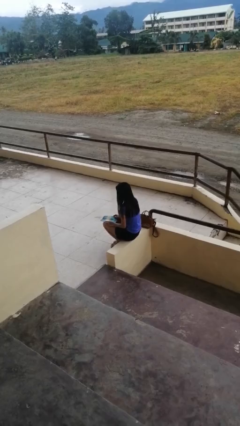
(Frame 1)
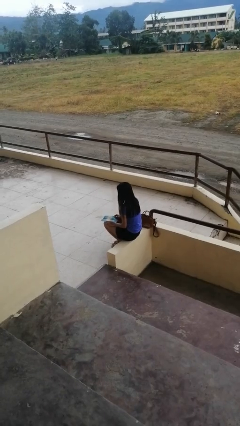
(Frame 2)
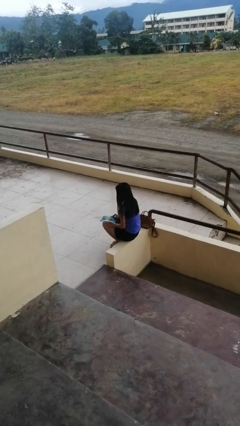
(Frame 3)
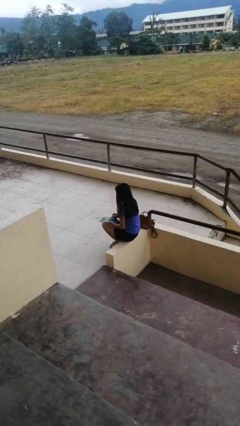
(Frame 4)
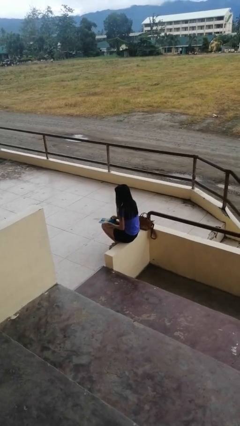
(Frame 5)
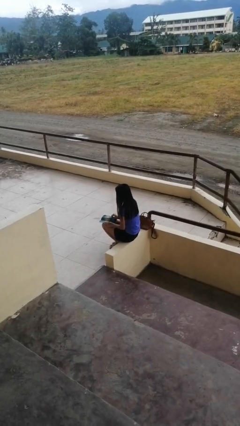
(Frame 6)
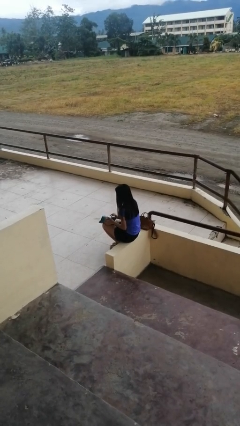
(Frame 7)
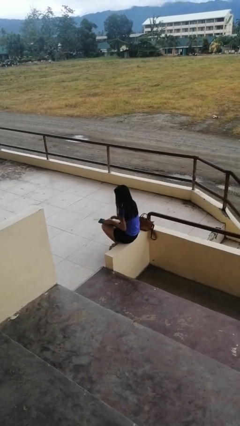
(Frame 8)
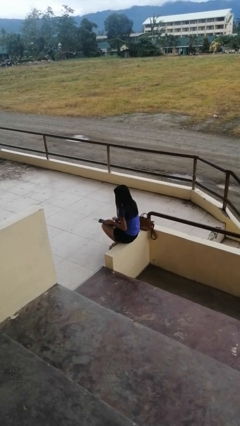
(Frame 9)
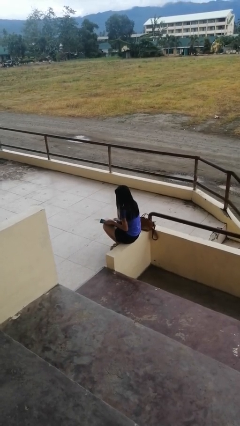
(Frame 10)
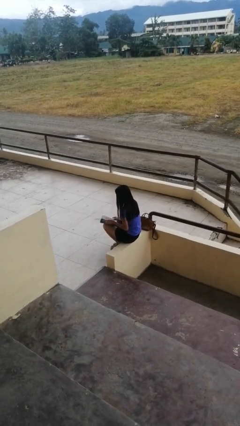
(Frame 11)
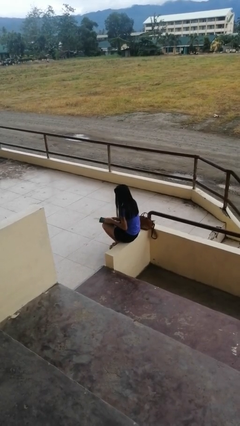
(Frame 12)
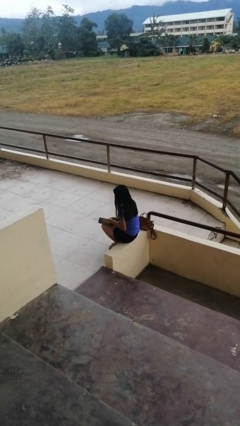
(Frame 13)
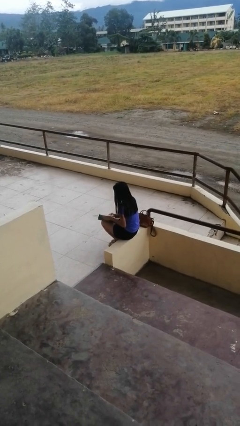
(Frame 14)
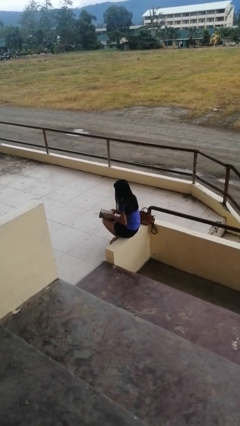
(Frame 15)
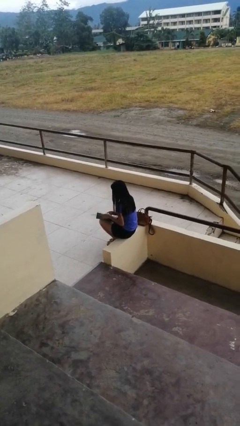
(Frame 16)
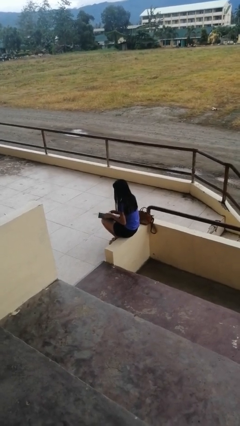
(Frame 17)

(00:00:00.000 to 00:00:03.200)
person reads magazine

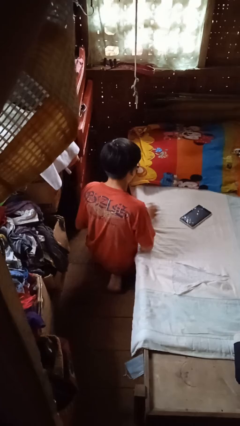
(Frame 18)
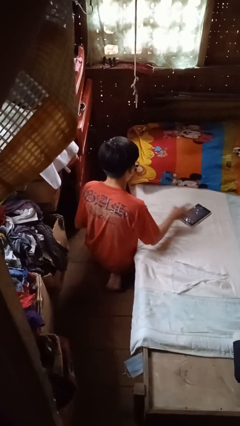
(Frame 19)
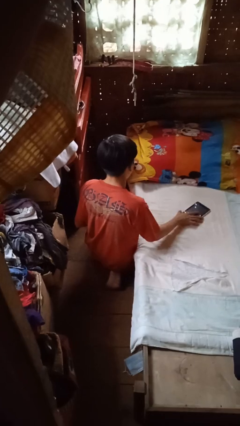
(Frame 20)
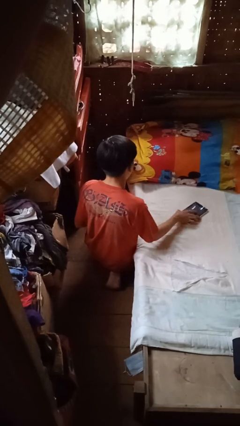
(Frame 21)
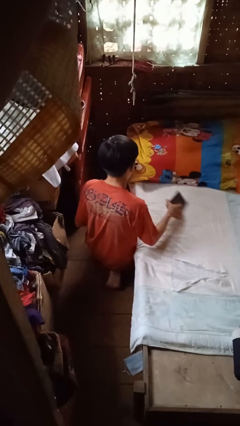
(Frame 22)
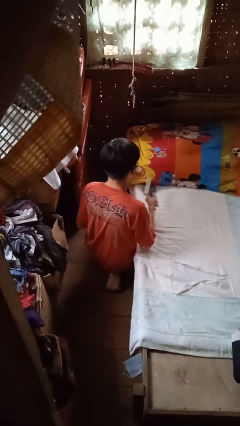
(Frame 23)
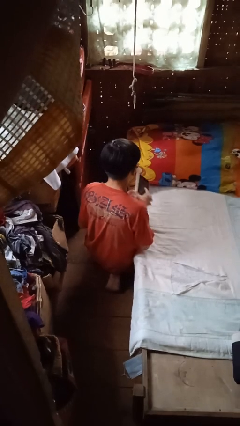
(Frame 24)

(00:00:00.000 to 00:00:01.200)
person picks up object from bed

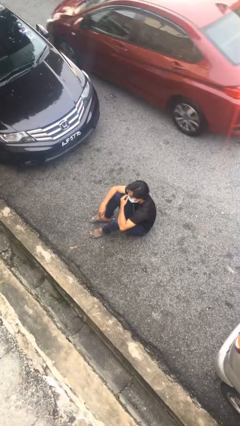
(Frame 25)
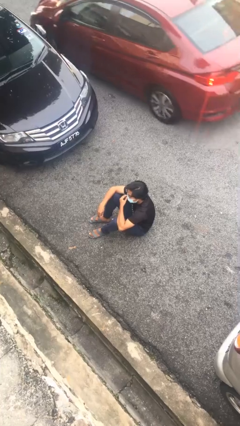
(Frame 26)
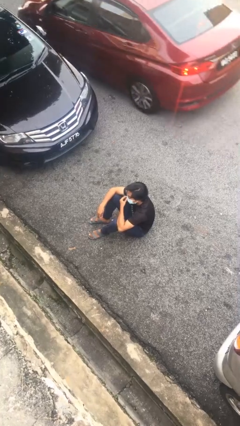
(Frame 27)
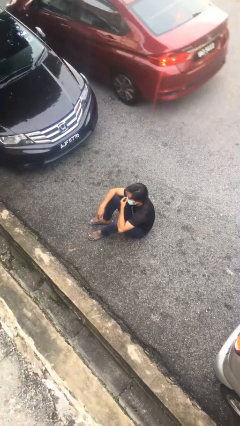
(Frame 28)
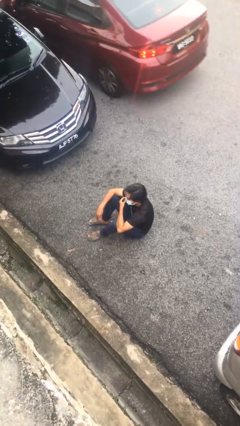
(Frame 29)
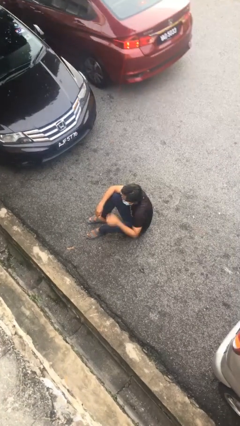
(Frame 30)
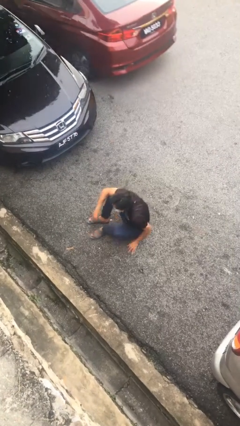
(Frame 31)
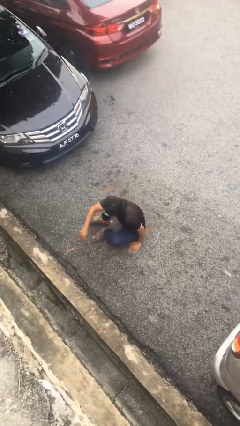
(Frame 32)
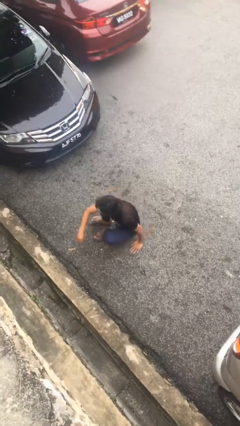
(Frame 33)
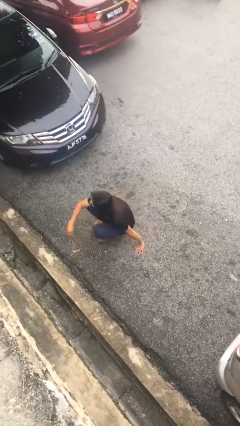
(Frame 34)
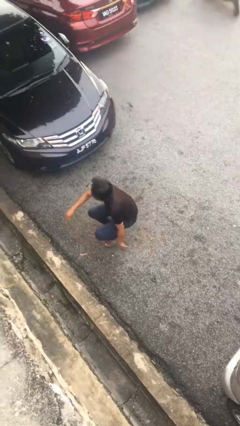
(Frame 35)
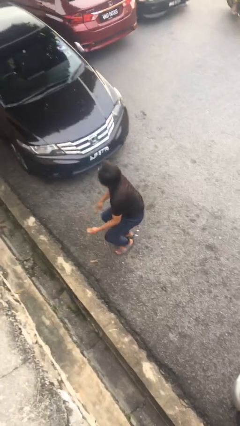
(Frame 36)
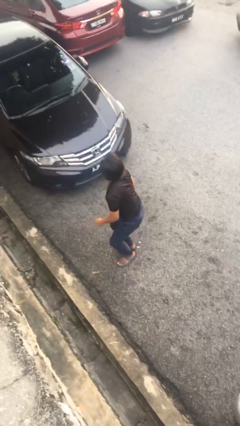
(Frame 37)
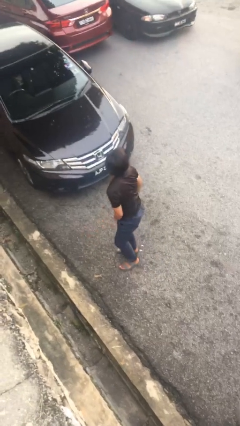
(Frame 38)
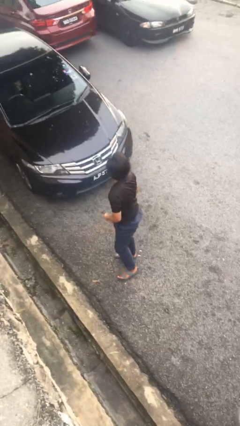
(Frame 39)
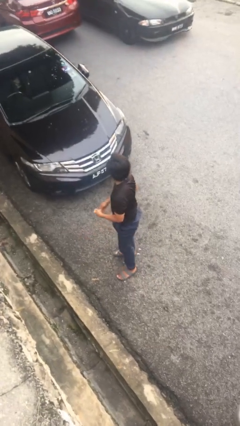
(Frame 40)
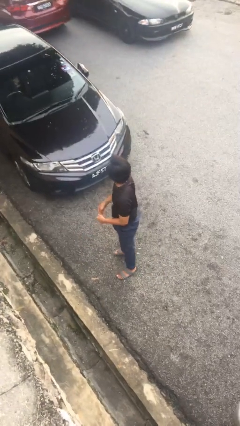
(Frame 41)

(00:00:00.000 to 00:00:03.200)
person stands up

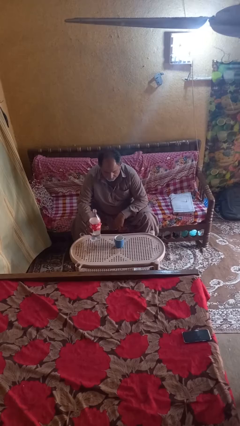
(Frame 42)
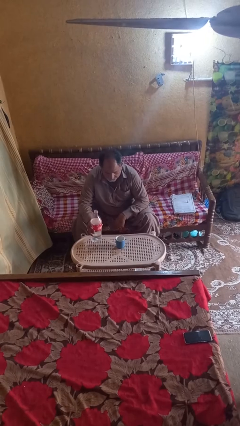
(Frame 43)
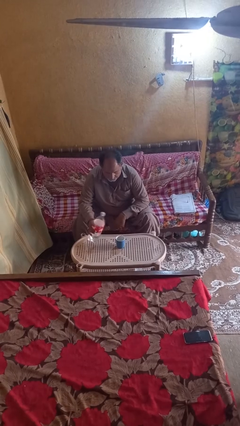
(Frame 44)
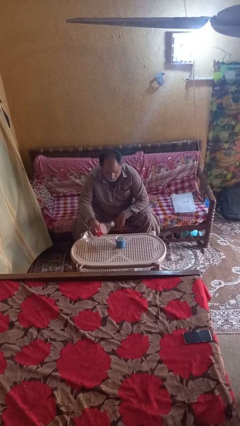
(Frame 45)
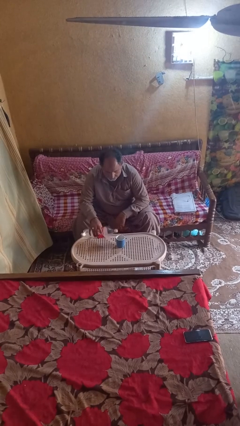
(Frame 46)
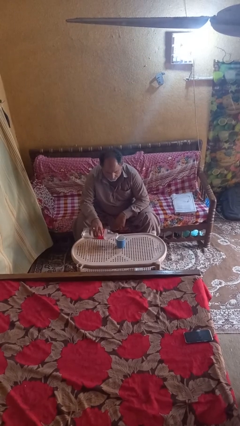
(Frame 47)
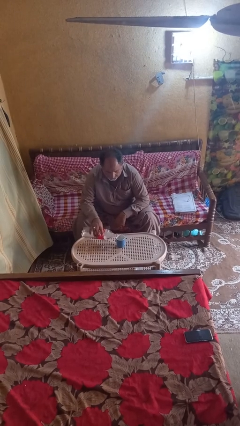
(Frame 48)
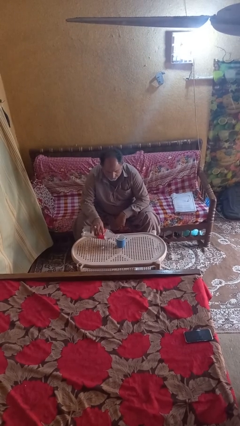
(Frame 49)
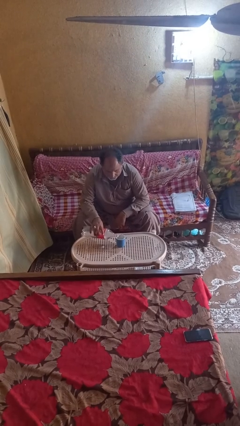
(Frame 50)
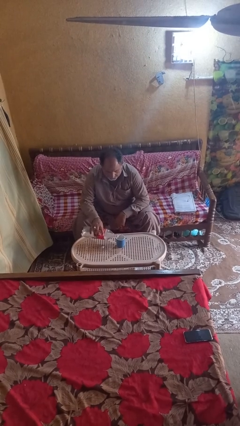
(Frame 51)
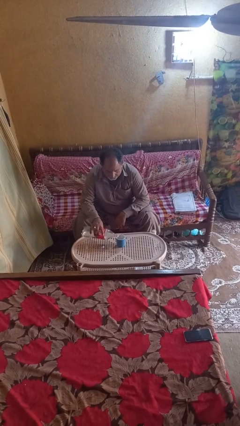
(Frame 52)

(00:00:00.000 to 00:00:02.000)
person pours liquid into cup

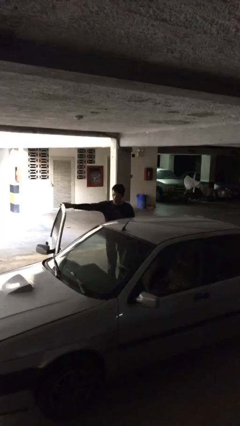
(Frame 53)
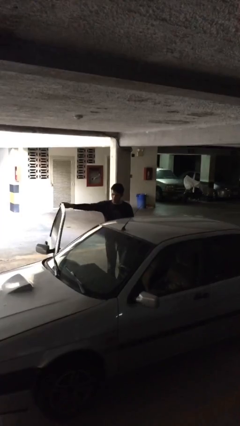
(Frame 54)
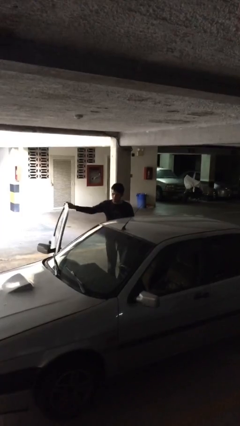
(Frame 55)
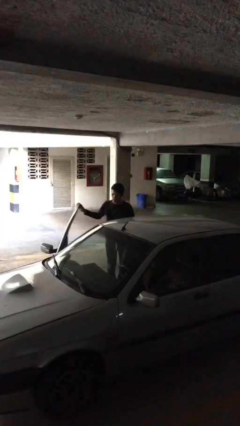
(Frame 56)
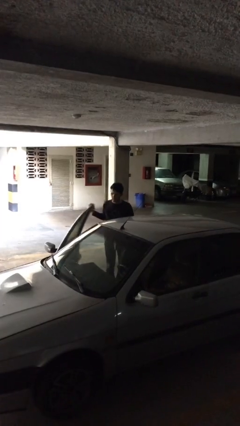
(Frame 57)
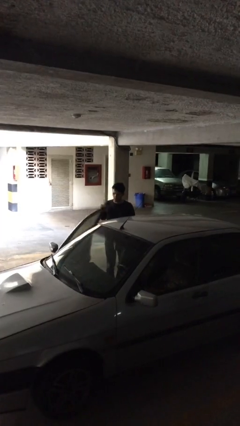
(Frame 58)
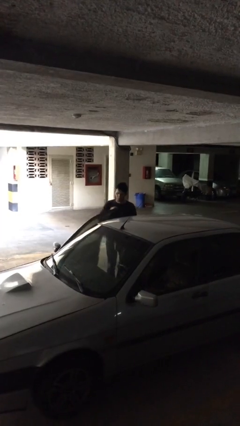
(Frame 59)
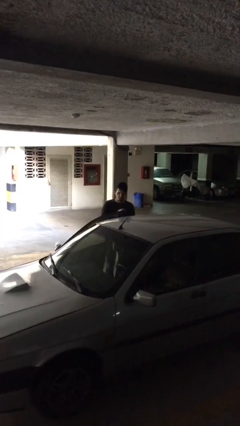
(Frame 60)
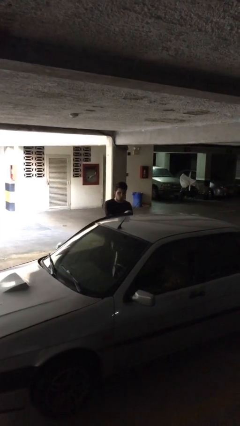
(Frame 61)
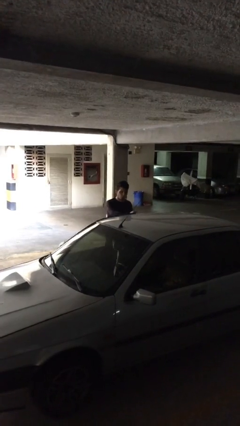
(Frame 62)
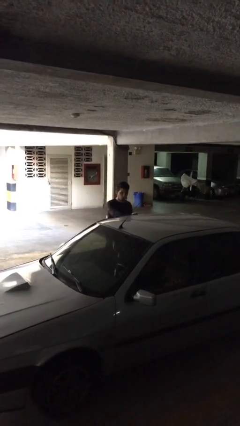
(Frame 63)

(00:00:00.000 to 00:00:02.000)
person closes car door

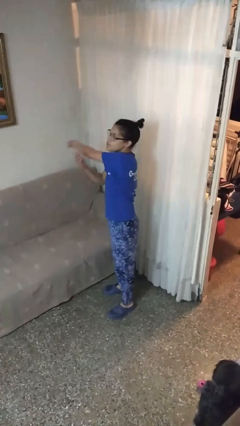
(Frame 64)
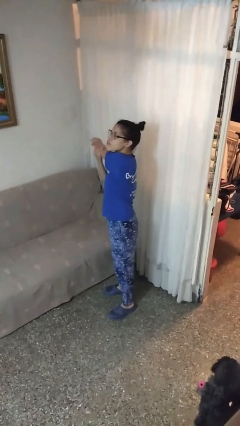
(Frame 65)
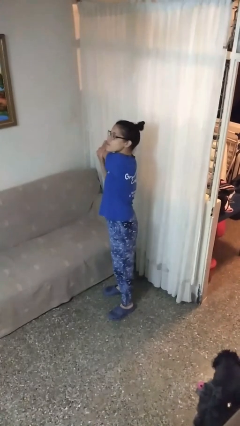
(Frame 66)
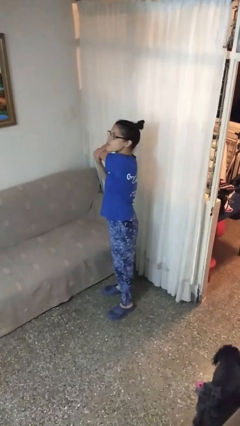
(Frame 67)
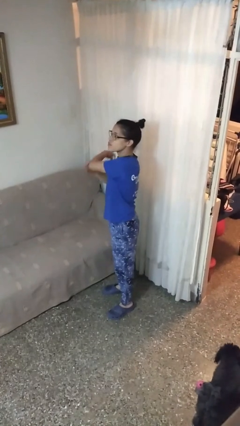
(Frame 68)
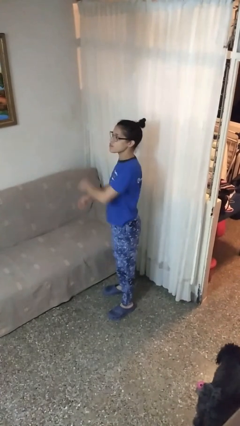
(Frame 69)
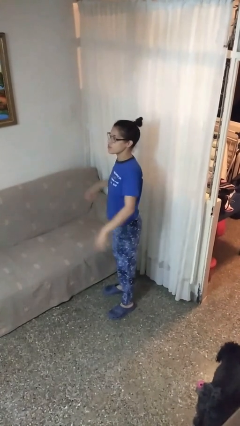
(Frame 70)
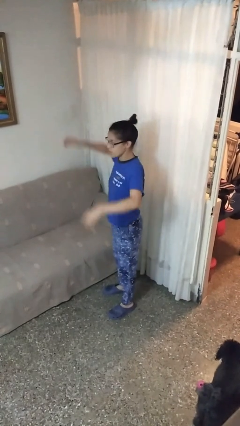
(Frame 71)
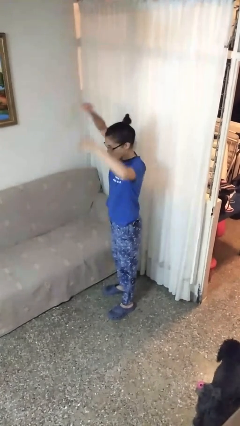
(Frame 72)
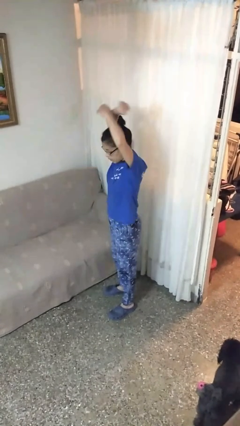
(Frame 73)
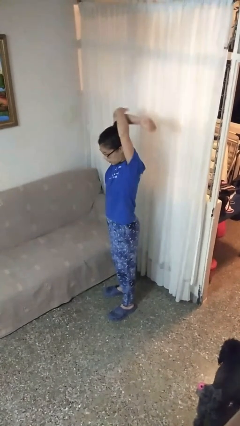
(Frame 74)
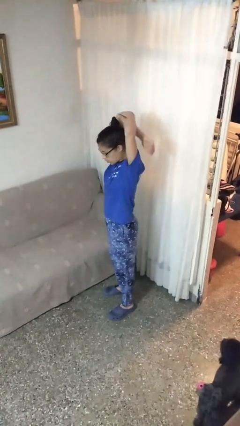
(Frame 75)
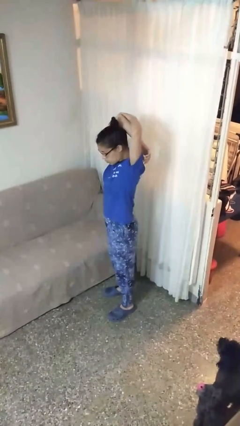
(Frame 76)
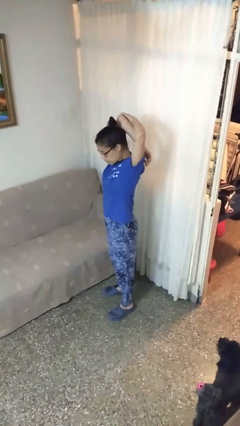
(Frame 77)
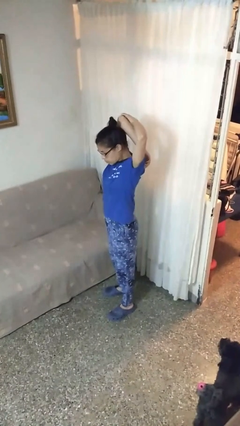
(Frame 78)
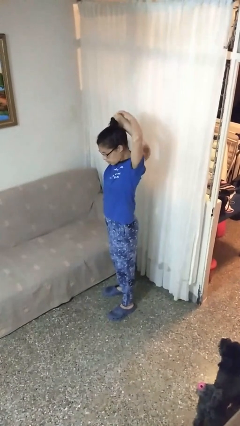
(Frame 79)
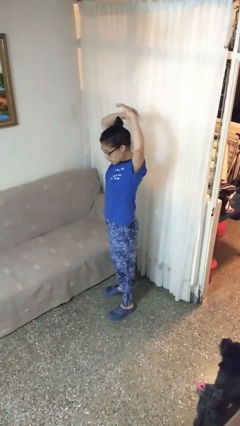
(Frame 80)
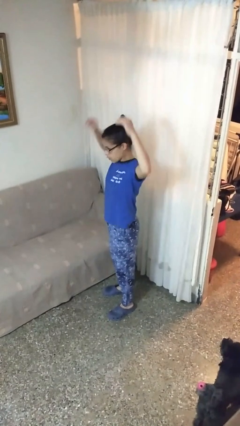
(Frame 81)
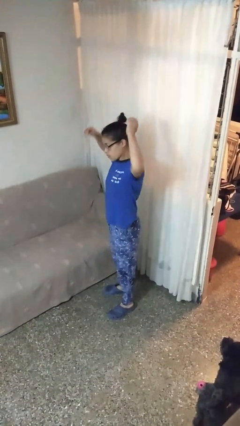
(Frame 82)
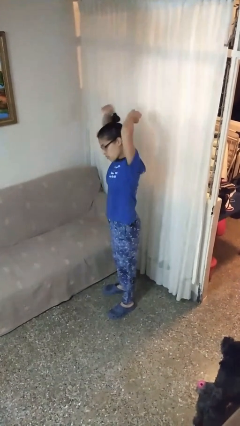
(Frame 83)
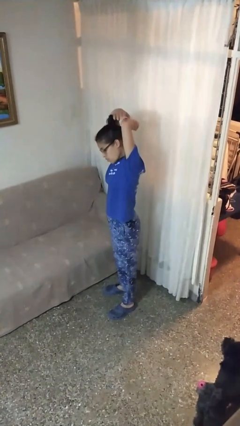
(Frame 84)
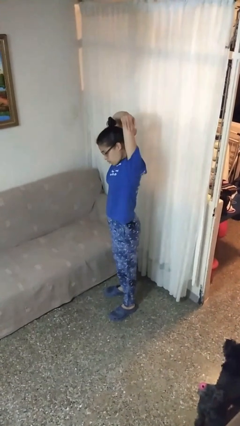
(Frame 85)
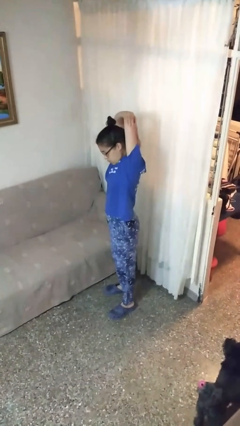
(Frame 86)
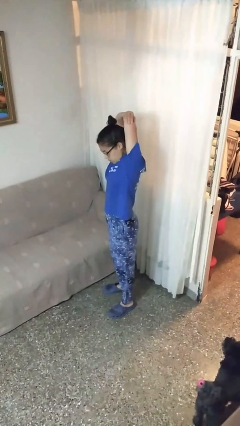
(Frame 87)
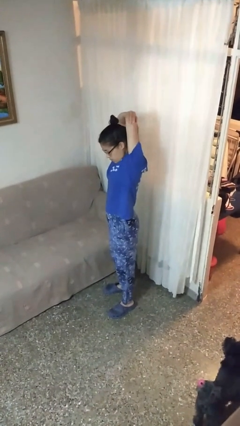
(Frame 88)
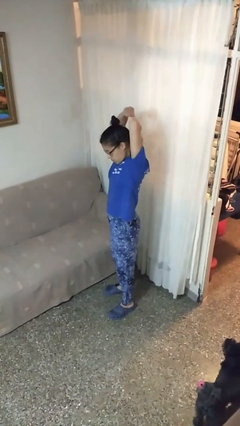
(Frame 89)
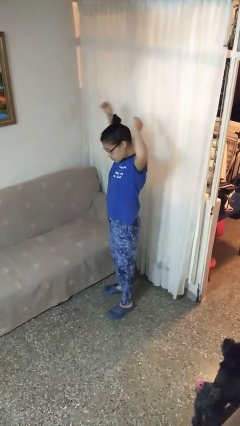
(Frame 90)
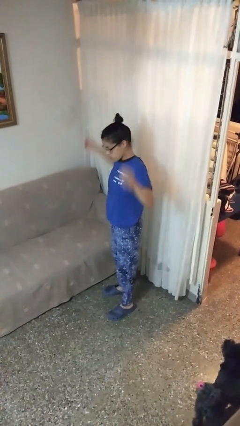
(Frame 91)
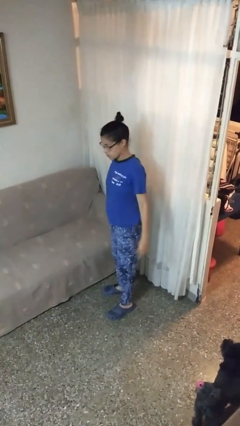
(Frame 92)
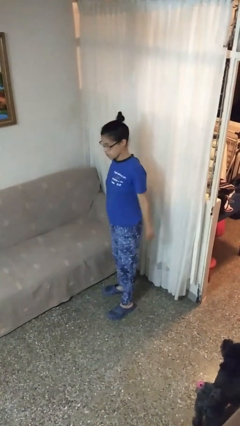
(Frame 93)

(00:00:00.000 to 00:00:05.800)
person stretches arms over head
